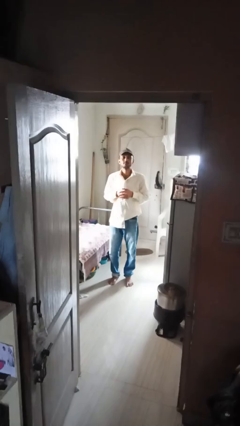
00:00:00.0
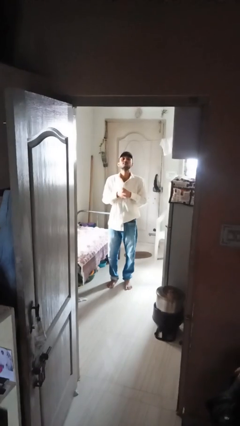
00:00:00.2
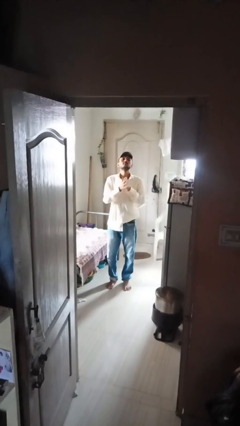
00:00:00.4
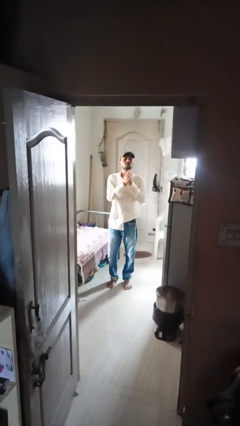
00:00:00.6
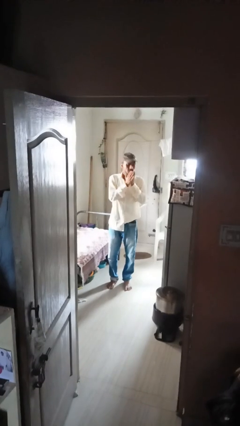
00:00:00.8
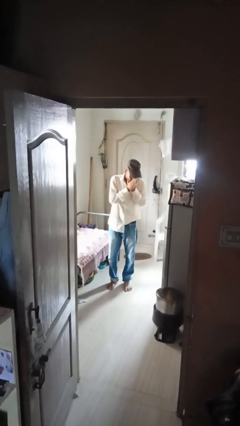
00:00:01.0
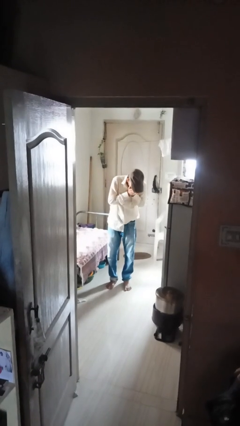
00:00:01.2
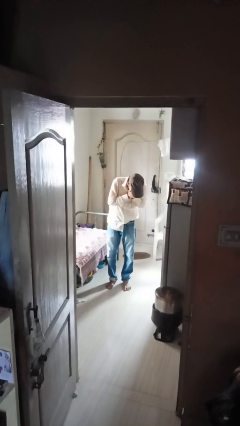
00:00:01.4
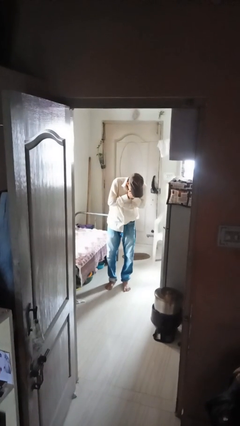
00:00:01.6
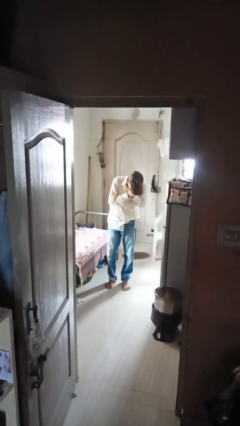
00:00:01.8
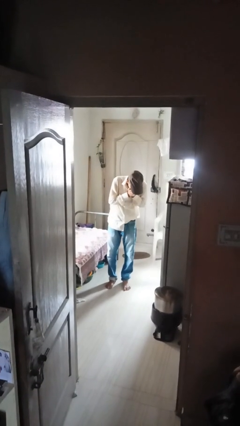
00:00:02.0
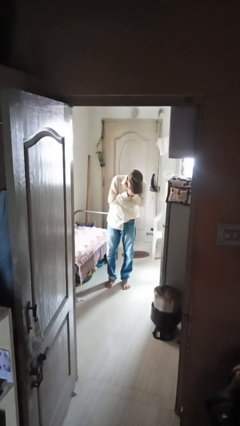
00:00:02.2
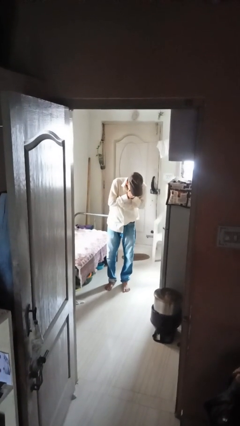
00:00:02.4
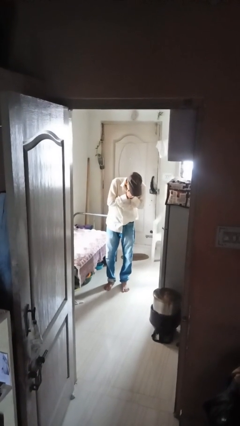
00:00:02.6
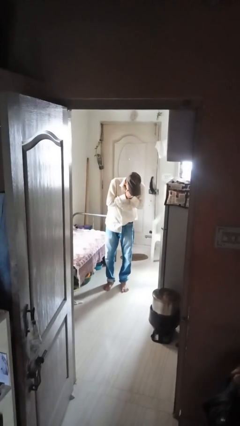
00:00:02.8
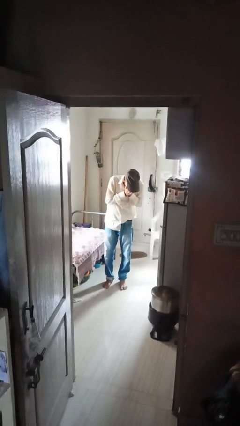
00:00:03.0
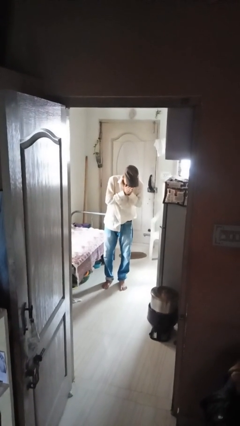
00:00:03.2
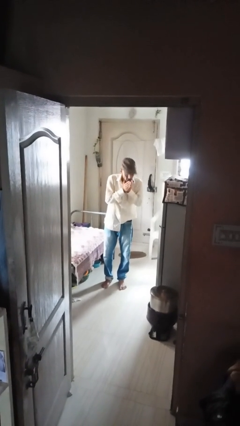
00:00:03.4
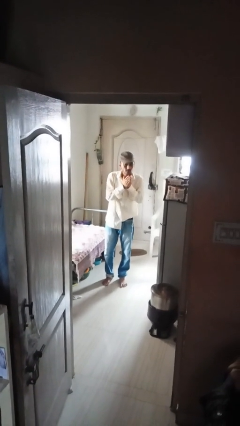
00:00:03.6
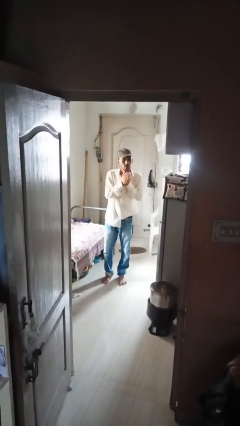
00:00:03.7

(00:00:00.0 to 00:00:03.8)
person sneezes into hand

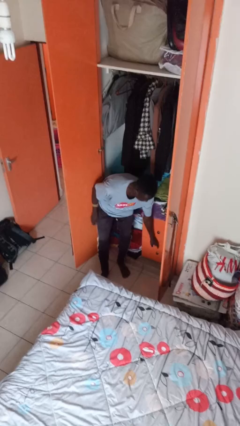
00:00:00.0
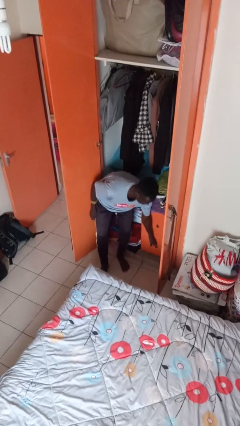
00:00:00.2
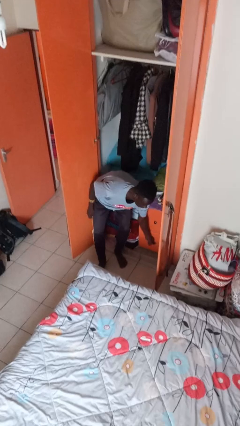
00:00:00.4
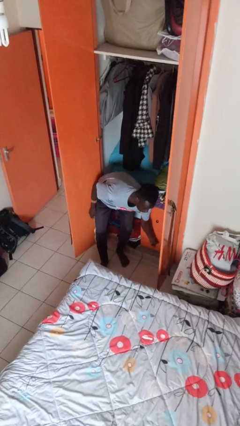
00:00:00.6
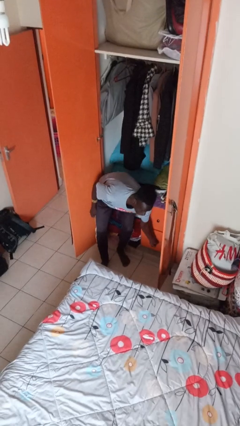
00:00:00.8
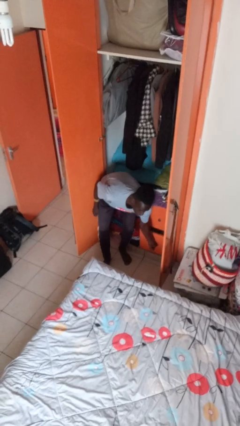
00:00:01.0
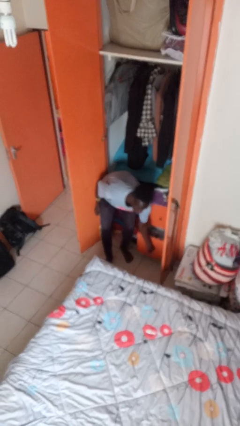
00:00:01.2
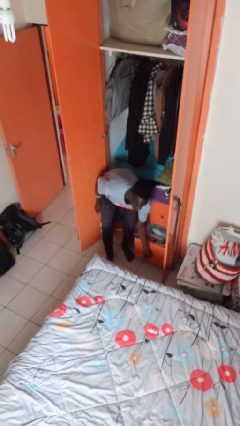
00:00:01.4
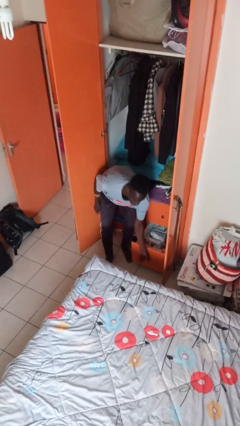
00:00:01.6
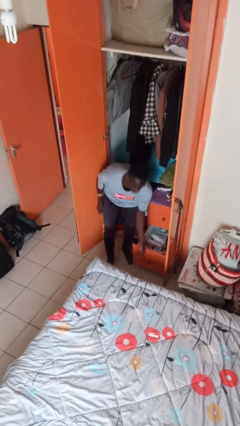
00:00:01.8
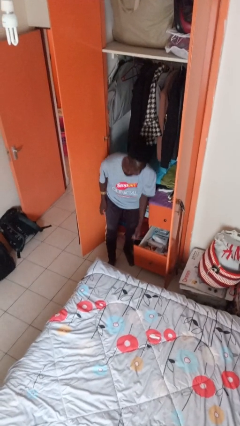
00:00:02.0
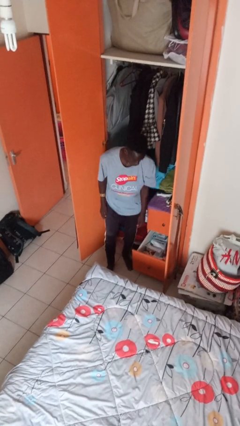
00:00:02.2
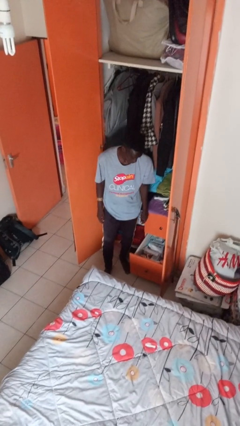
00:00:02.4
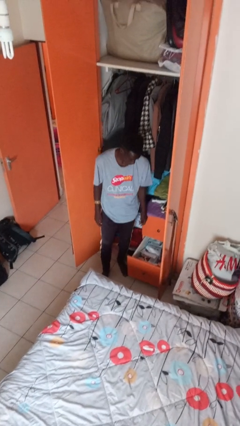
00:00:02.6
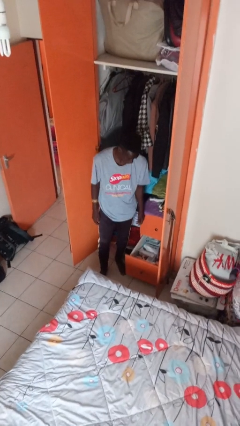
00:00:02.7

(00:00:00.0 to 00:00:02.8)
person opens dresser drawer

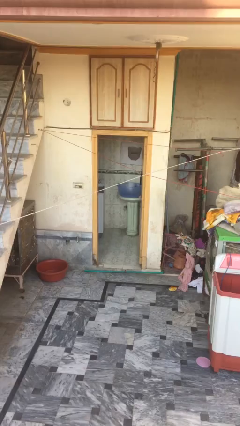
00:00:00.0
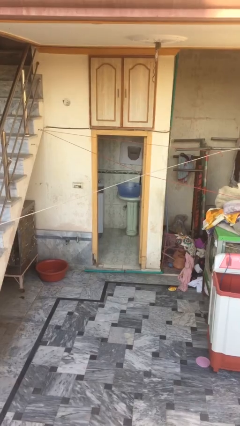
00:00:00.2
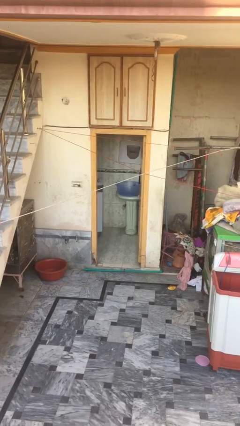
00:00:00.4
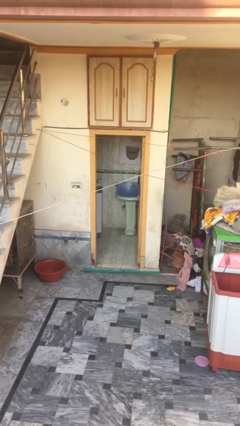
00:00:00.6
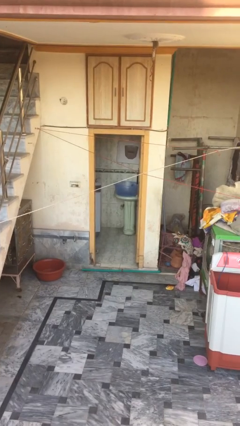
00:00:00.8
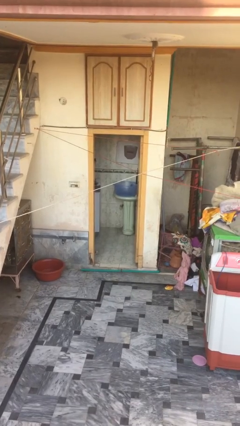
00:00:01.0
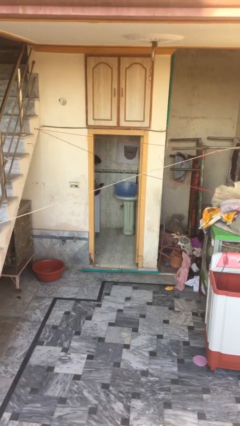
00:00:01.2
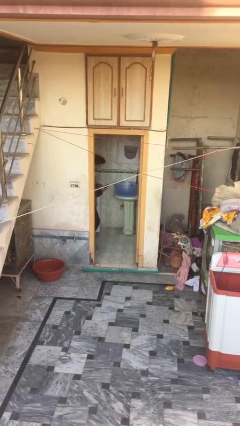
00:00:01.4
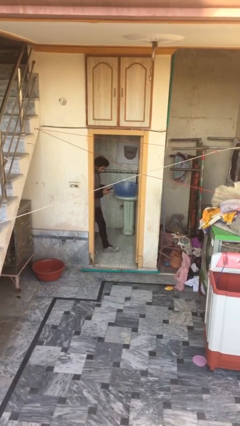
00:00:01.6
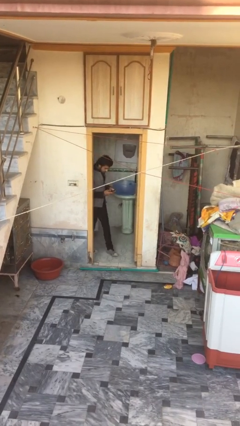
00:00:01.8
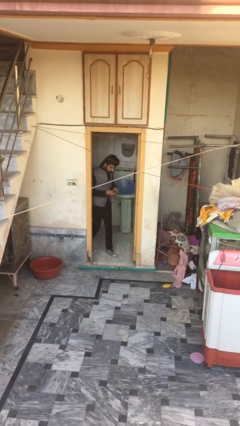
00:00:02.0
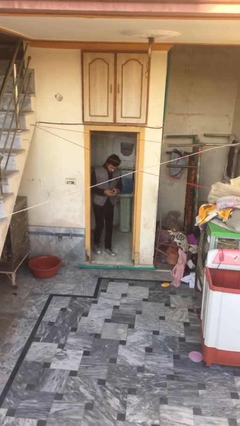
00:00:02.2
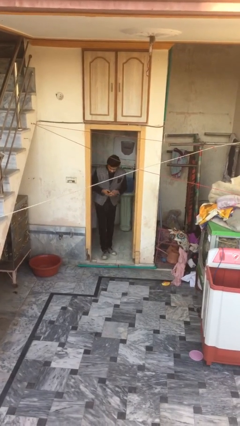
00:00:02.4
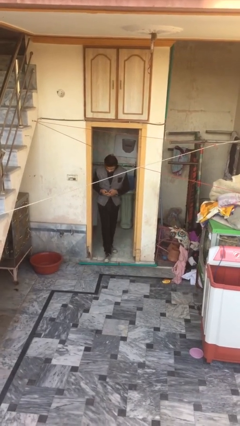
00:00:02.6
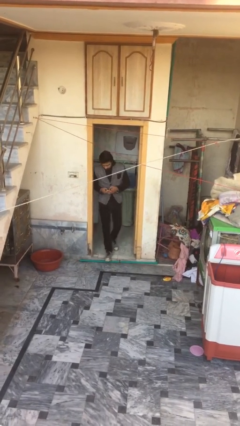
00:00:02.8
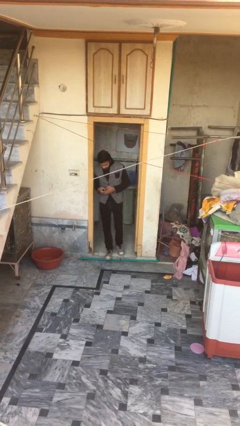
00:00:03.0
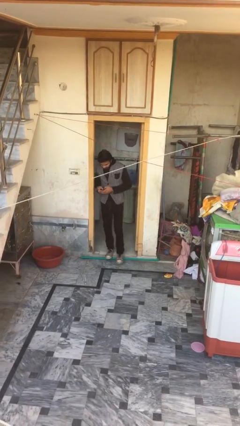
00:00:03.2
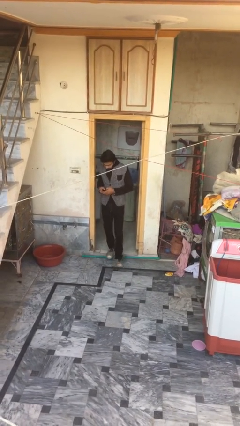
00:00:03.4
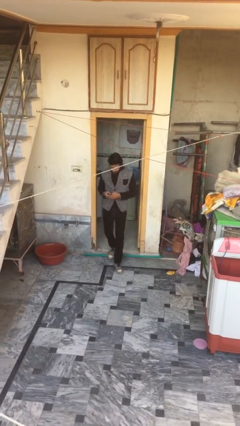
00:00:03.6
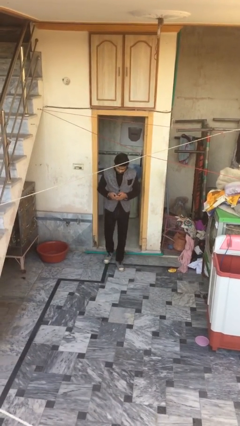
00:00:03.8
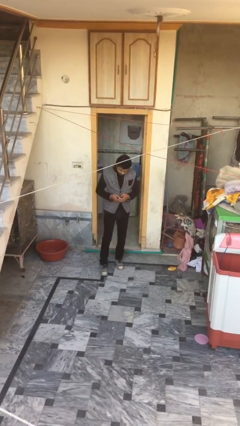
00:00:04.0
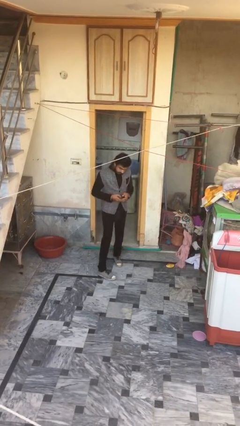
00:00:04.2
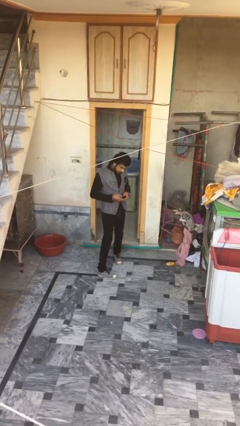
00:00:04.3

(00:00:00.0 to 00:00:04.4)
person enters scene through structure

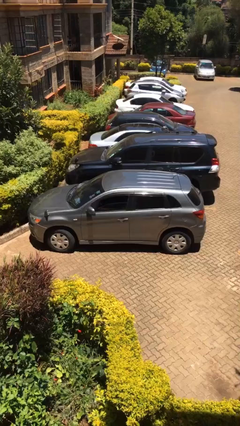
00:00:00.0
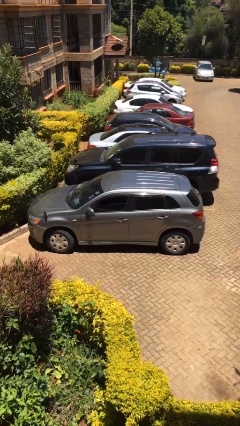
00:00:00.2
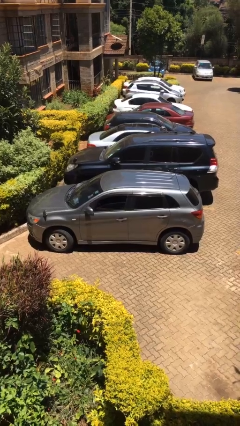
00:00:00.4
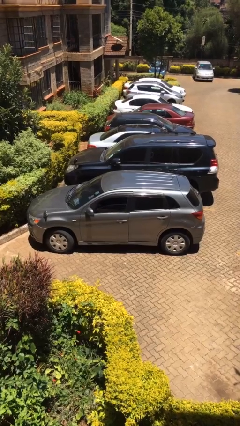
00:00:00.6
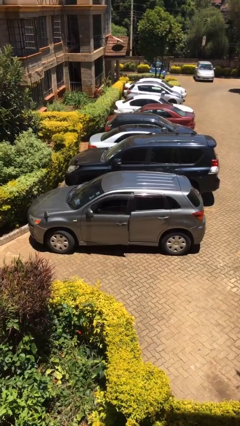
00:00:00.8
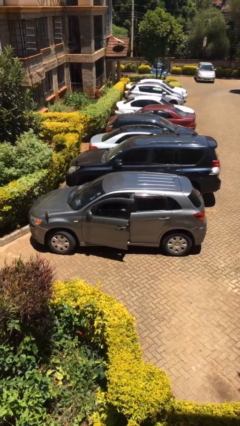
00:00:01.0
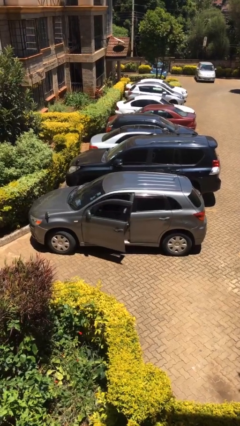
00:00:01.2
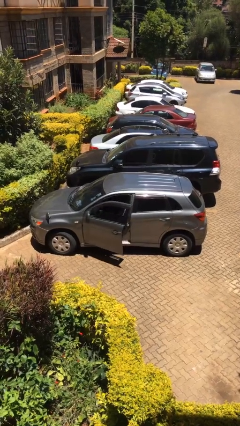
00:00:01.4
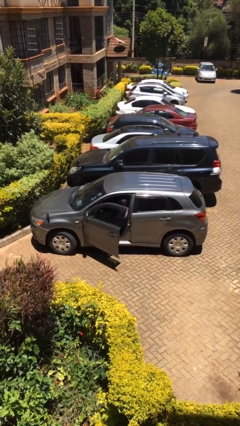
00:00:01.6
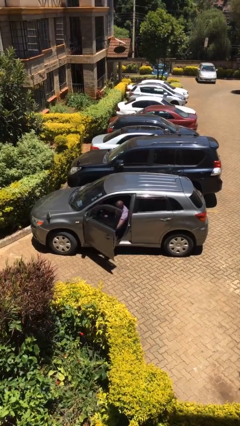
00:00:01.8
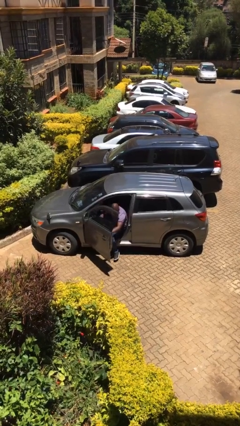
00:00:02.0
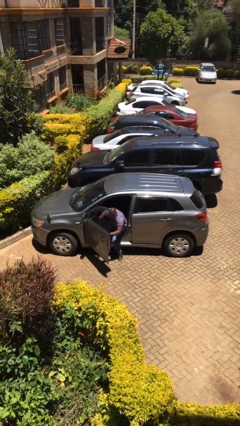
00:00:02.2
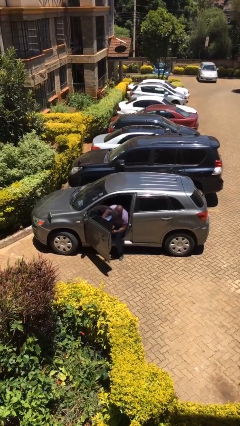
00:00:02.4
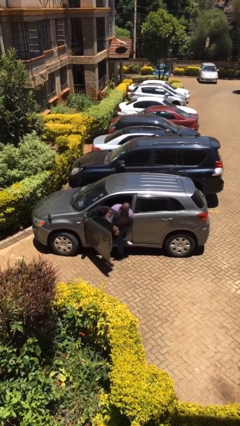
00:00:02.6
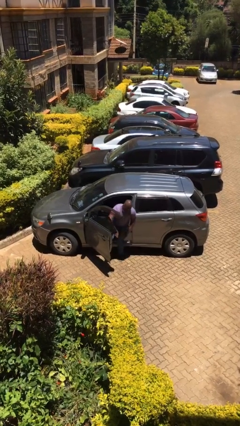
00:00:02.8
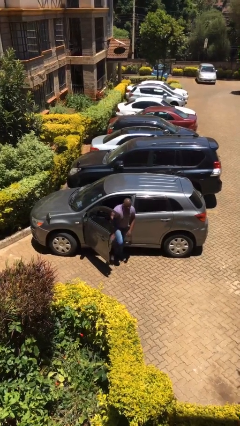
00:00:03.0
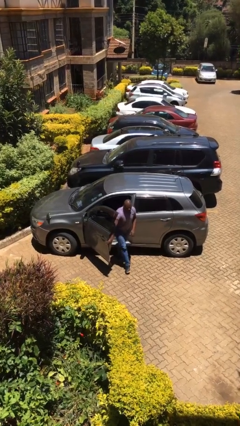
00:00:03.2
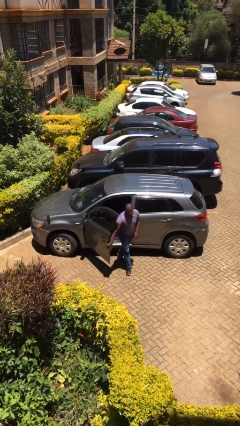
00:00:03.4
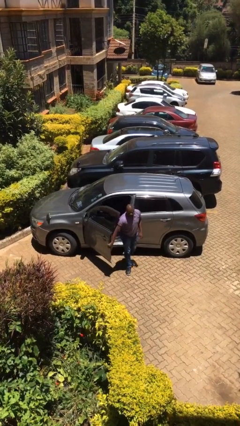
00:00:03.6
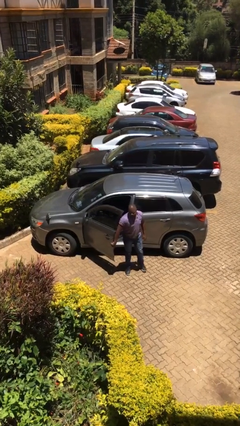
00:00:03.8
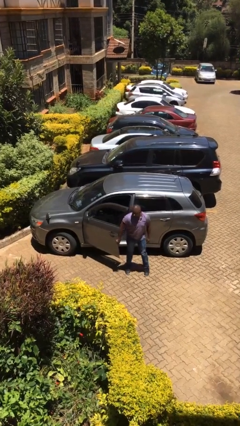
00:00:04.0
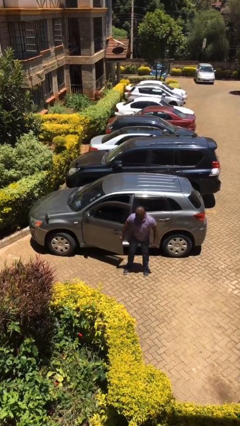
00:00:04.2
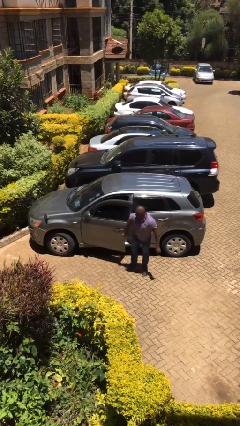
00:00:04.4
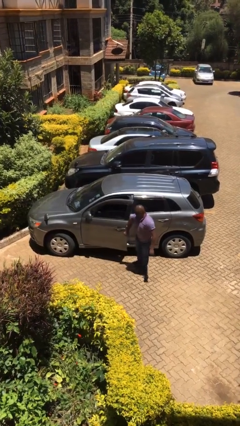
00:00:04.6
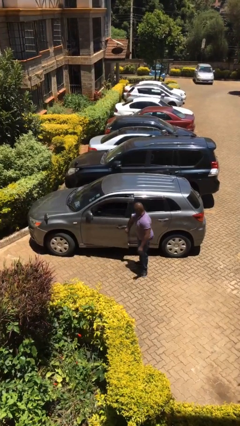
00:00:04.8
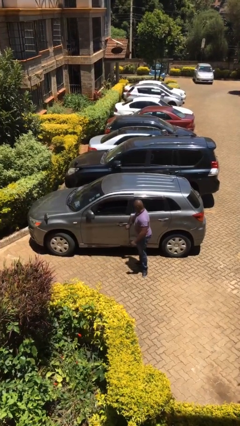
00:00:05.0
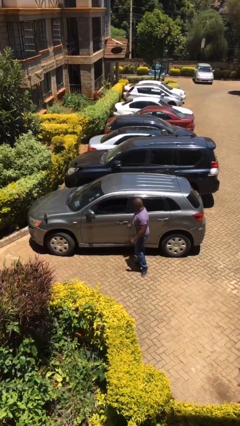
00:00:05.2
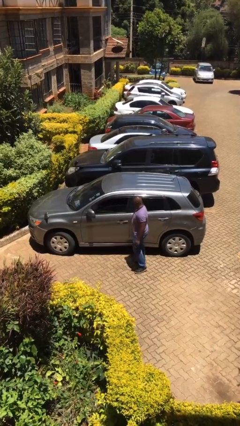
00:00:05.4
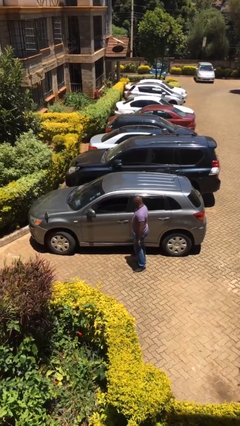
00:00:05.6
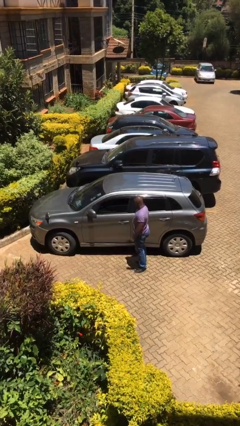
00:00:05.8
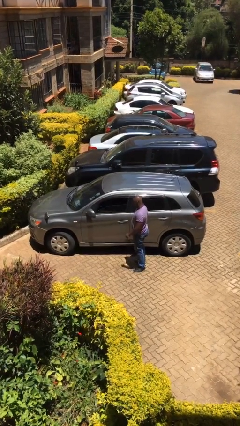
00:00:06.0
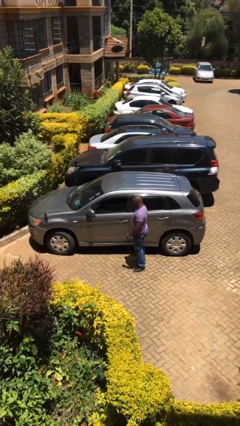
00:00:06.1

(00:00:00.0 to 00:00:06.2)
car drops off person

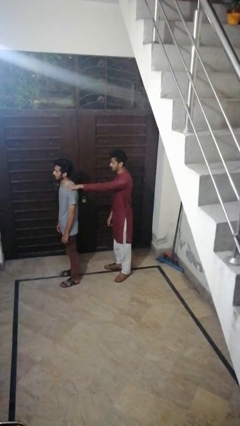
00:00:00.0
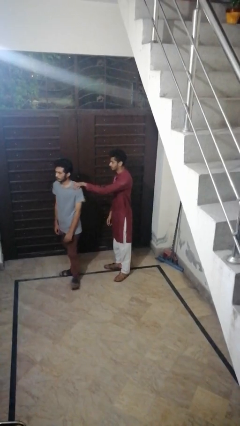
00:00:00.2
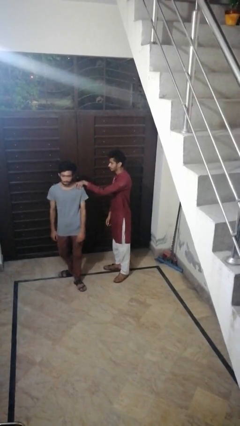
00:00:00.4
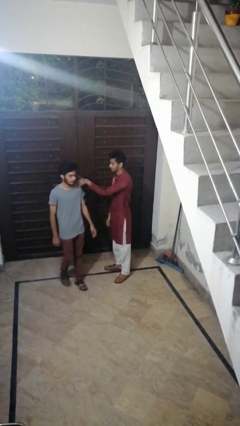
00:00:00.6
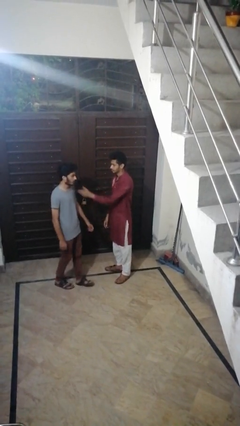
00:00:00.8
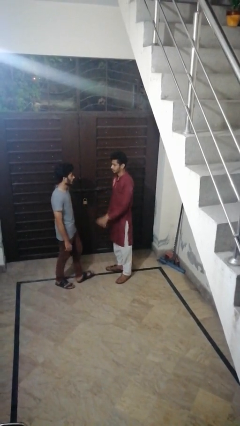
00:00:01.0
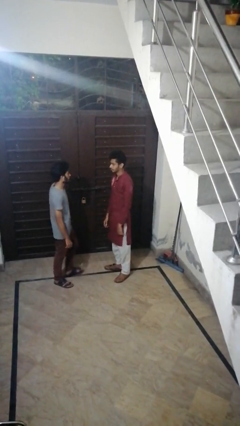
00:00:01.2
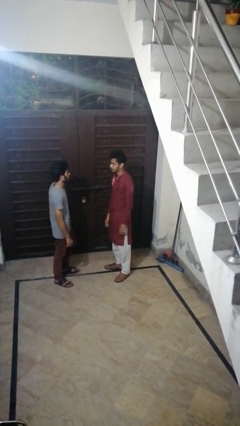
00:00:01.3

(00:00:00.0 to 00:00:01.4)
person spins person around
